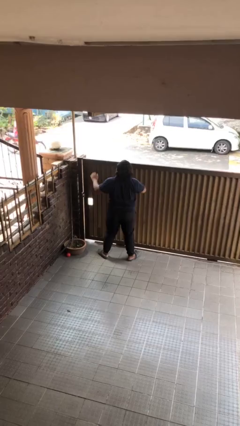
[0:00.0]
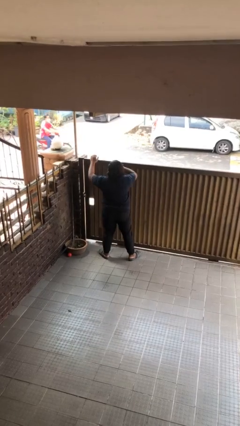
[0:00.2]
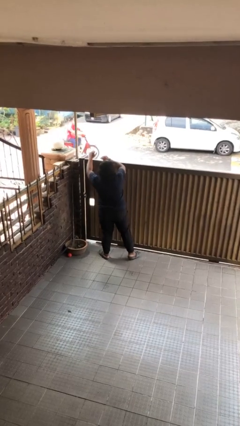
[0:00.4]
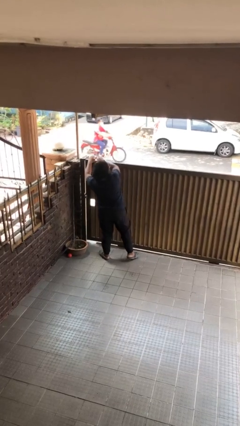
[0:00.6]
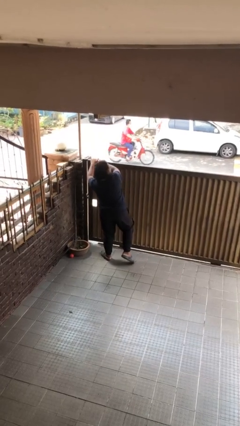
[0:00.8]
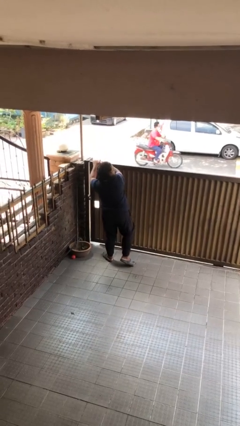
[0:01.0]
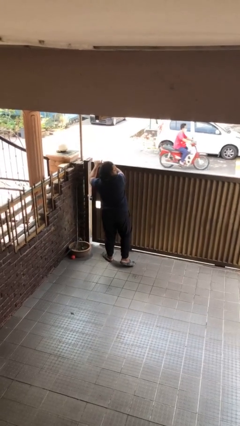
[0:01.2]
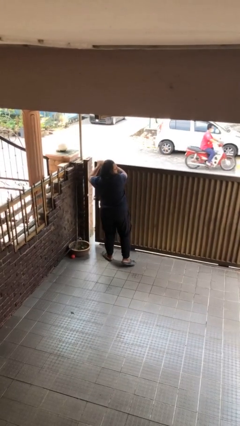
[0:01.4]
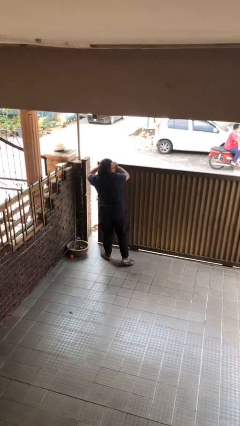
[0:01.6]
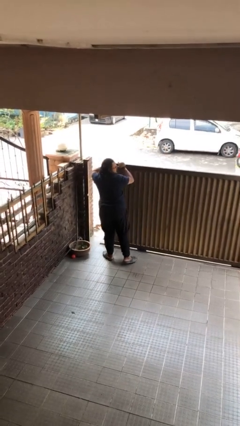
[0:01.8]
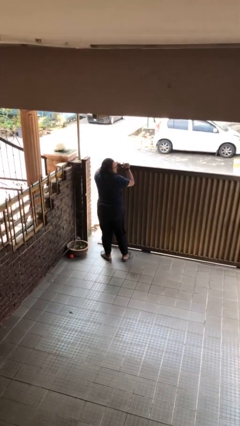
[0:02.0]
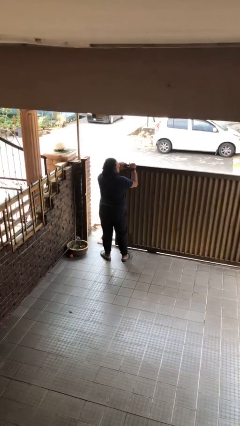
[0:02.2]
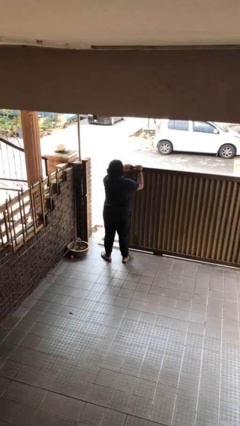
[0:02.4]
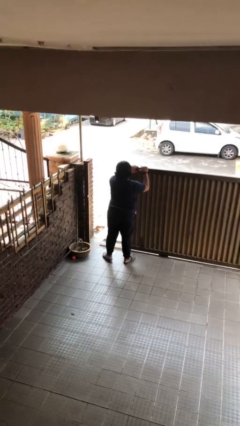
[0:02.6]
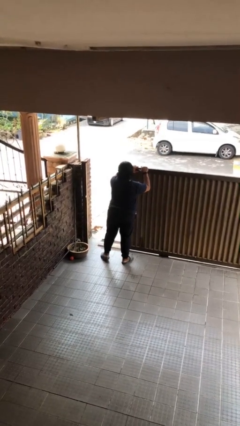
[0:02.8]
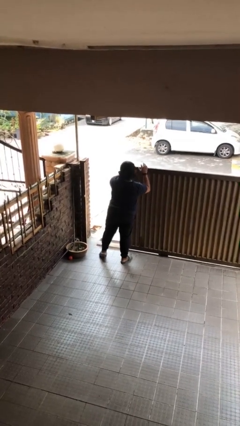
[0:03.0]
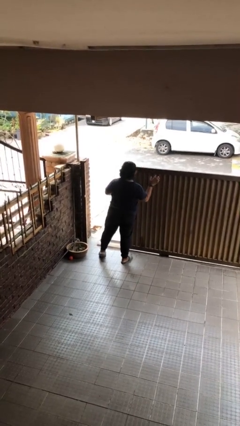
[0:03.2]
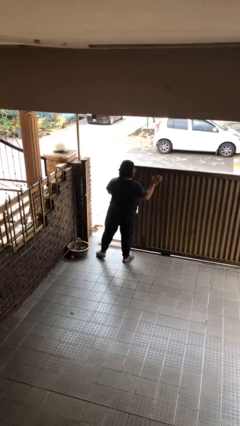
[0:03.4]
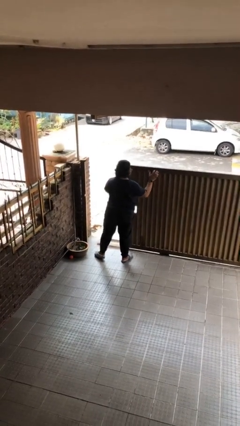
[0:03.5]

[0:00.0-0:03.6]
person opens facility door

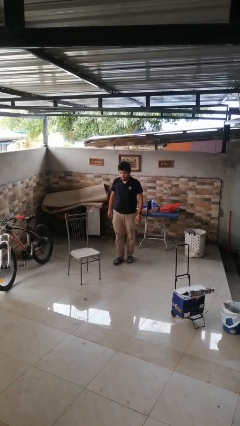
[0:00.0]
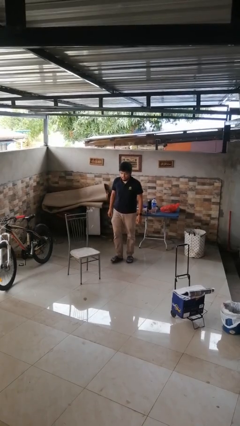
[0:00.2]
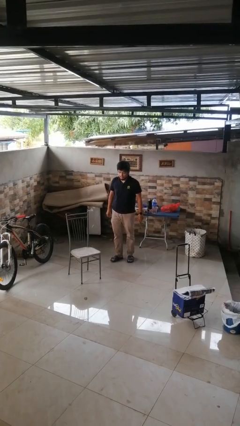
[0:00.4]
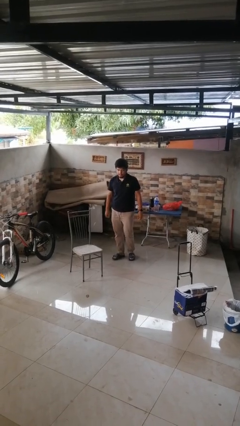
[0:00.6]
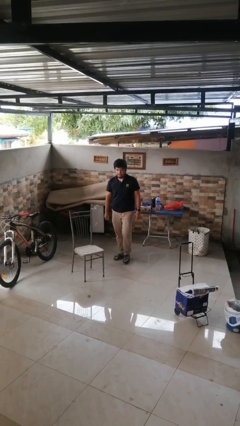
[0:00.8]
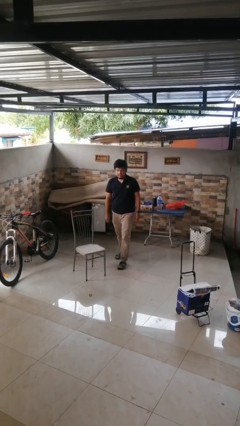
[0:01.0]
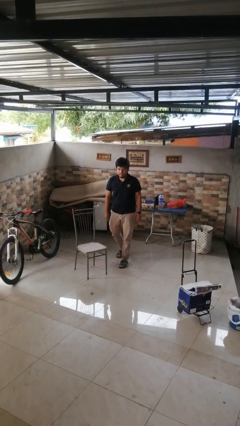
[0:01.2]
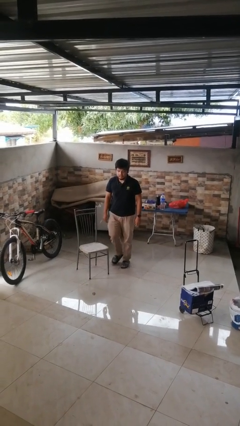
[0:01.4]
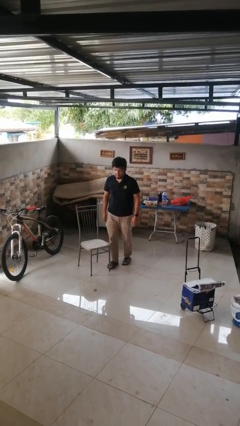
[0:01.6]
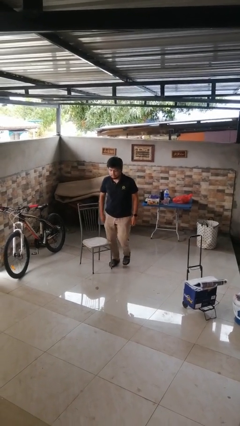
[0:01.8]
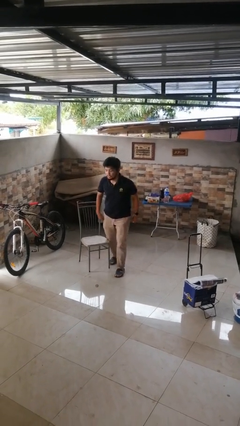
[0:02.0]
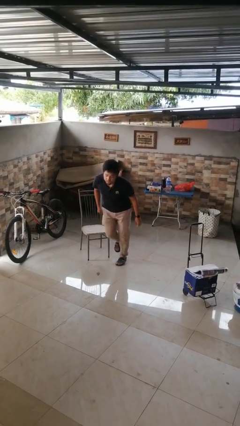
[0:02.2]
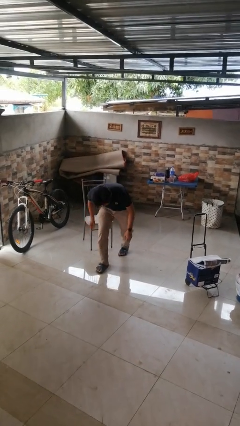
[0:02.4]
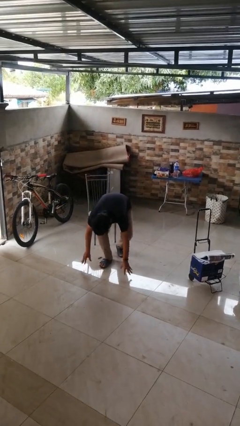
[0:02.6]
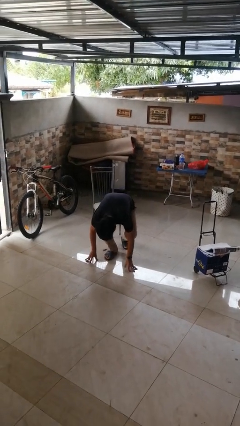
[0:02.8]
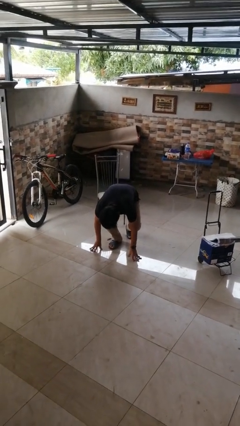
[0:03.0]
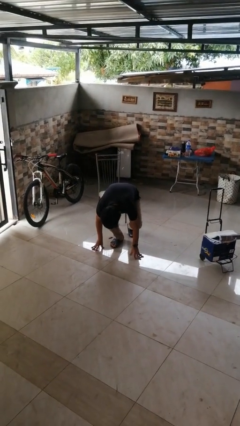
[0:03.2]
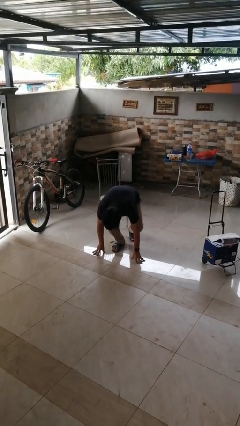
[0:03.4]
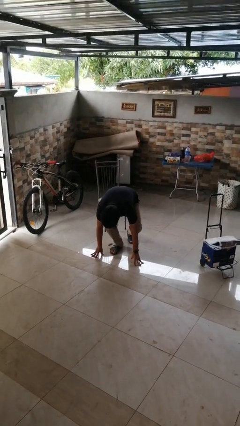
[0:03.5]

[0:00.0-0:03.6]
person trips on object on floor

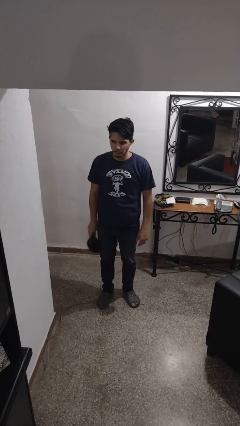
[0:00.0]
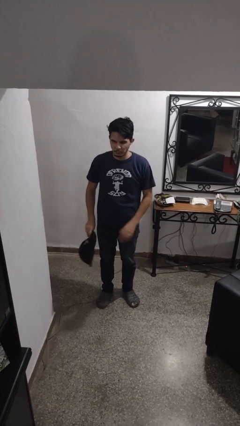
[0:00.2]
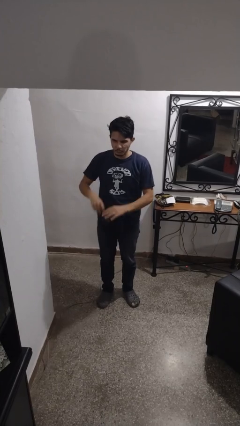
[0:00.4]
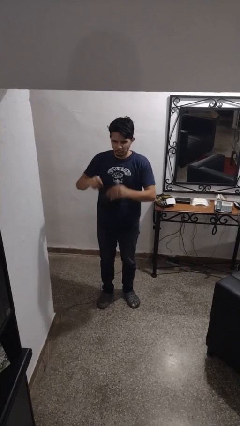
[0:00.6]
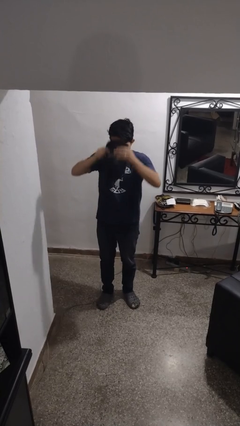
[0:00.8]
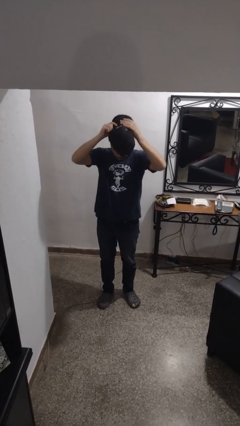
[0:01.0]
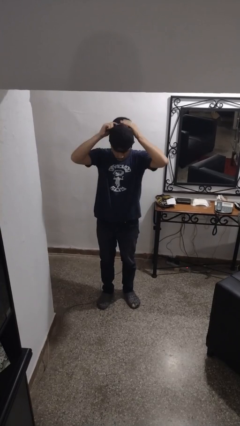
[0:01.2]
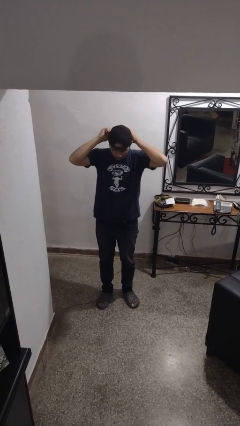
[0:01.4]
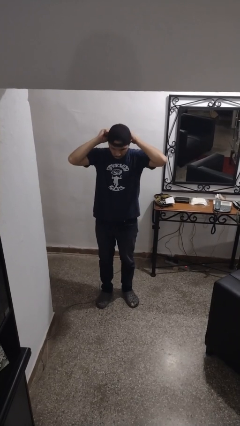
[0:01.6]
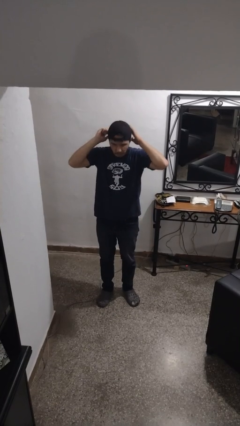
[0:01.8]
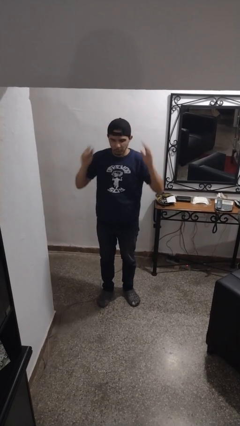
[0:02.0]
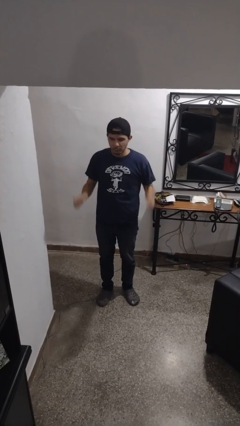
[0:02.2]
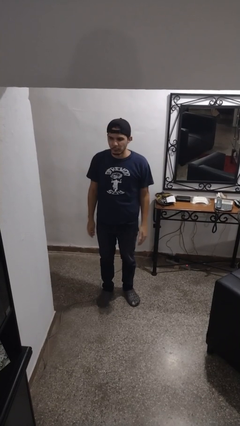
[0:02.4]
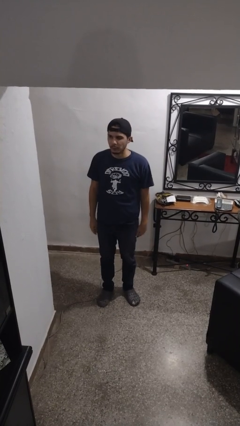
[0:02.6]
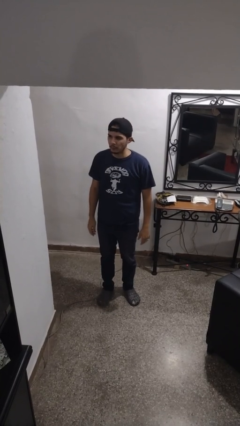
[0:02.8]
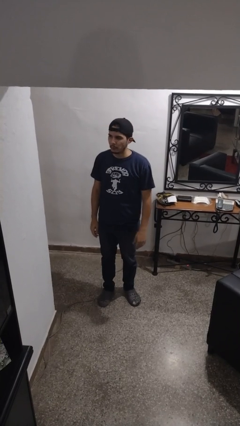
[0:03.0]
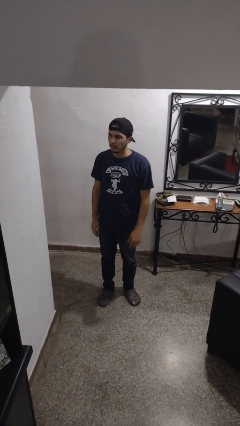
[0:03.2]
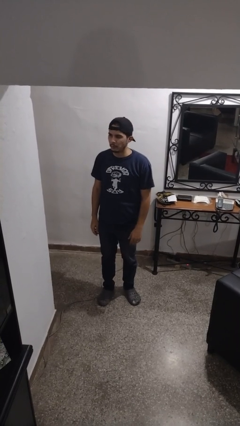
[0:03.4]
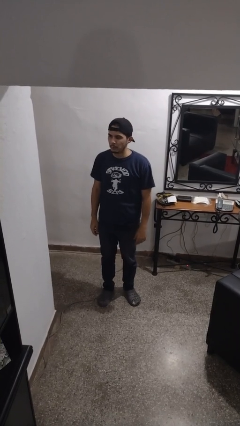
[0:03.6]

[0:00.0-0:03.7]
person puts on hat

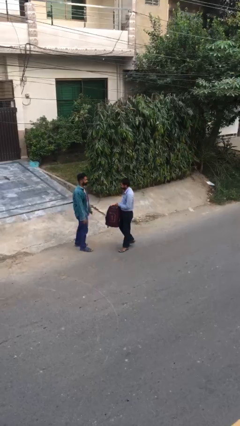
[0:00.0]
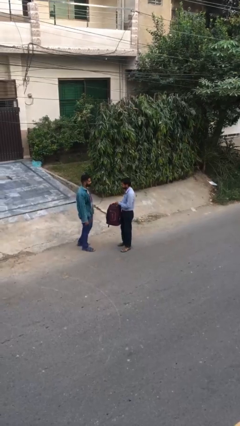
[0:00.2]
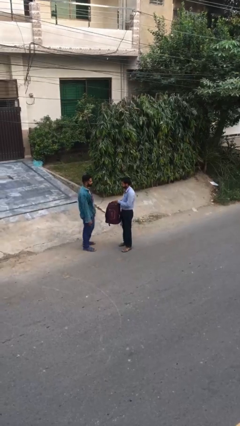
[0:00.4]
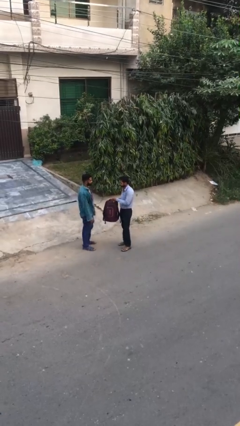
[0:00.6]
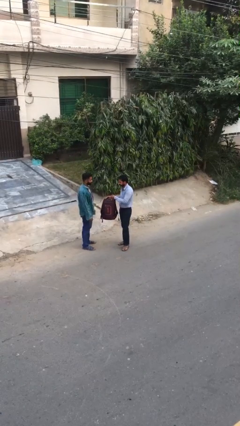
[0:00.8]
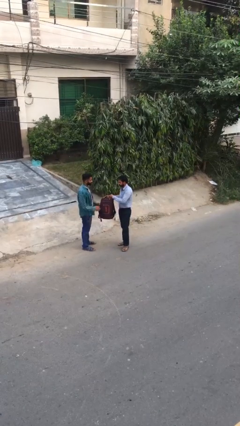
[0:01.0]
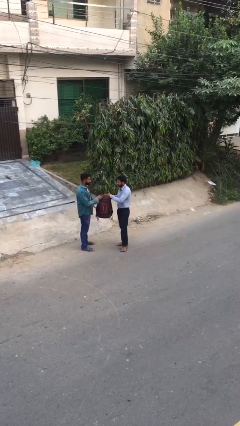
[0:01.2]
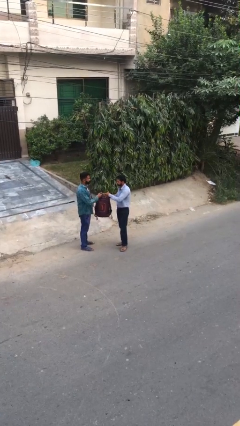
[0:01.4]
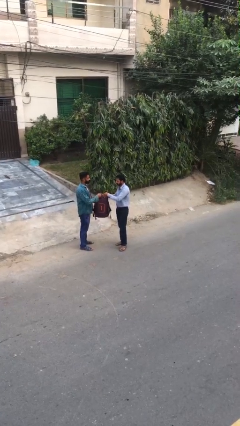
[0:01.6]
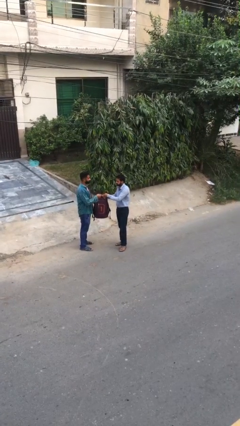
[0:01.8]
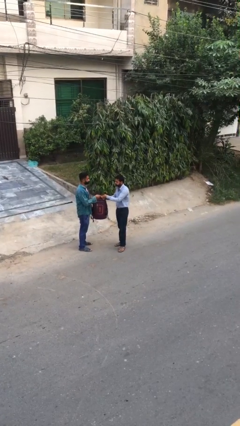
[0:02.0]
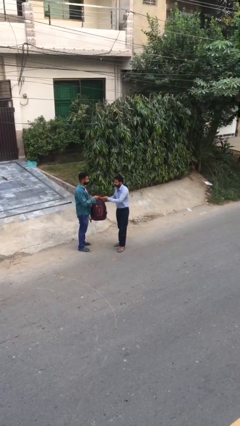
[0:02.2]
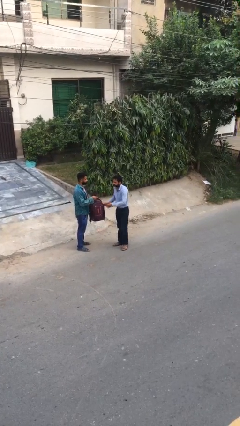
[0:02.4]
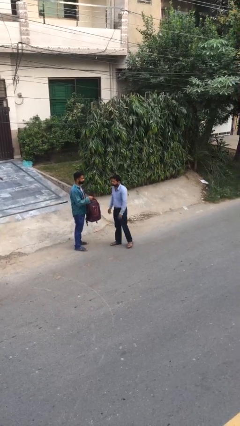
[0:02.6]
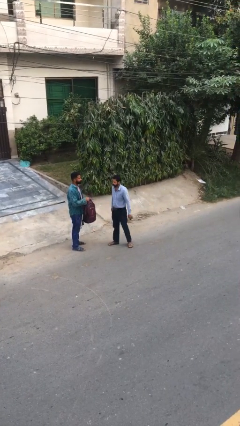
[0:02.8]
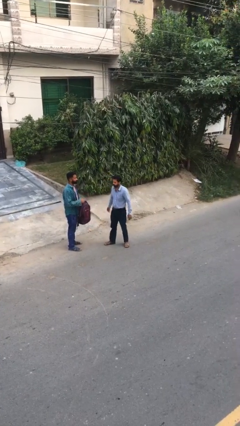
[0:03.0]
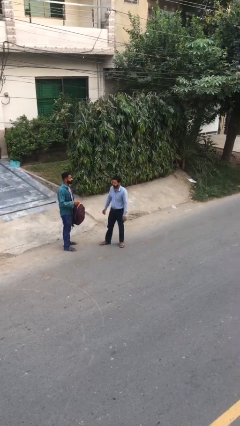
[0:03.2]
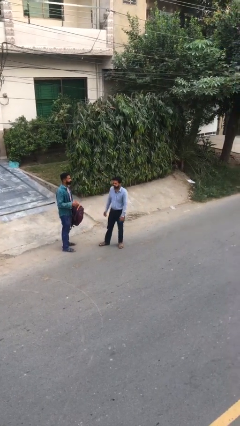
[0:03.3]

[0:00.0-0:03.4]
person transfers object to person

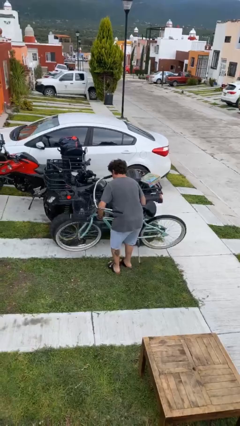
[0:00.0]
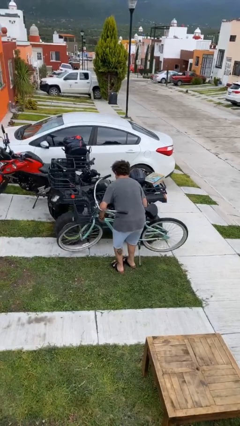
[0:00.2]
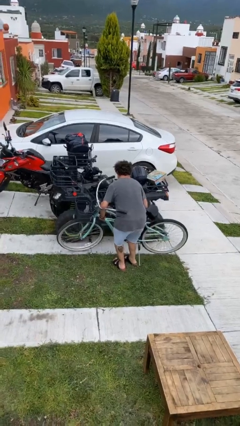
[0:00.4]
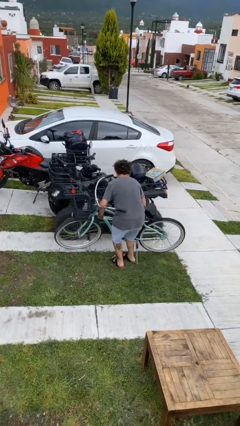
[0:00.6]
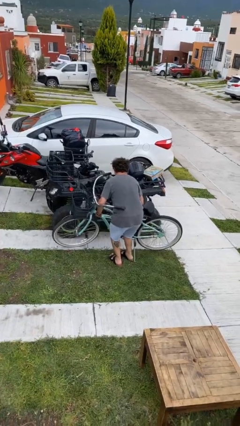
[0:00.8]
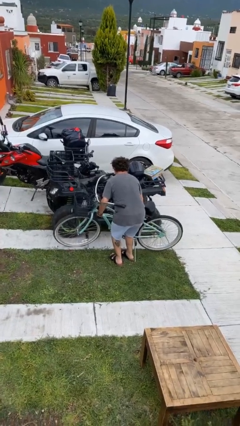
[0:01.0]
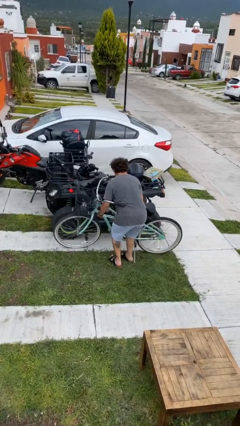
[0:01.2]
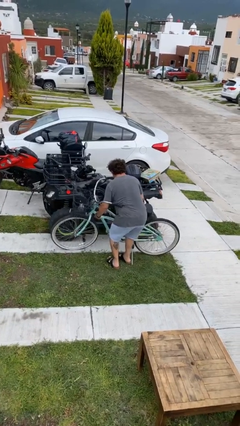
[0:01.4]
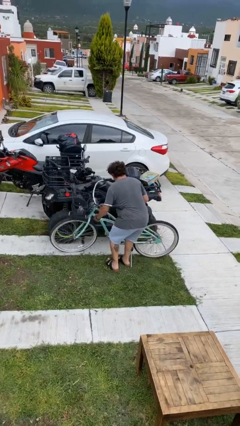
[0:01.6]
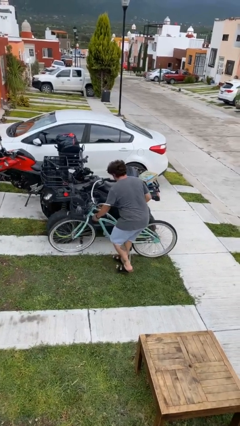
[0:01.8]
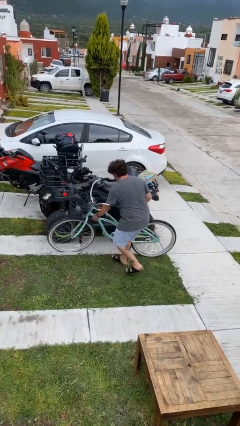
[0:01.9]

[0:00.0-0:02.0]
person puts down object on floor

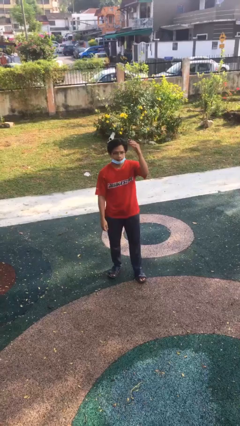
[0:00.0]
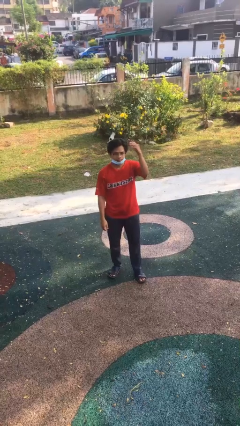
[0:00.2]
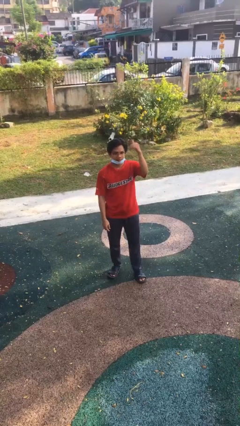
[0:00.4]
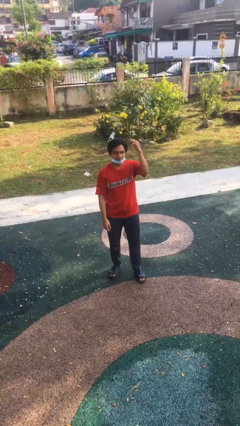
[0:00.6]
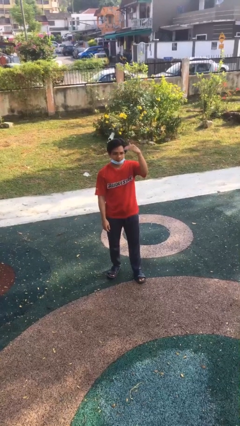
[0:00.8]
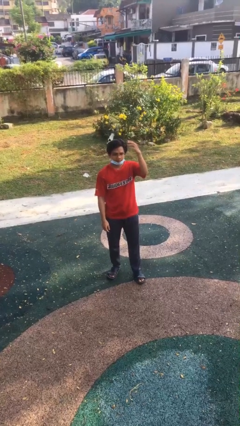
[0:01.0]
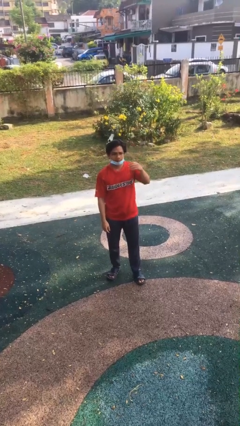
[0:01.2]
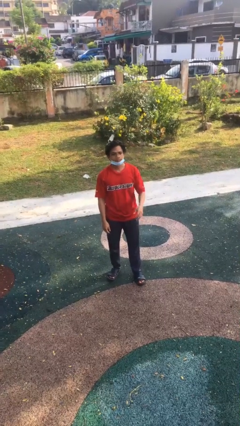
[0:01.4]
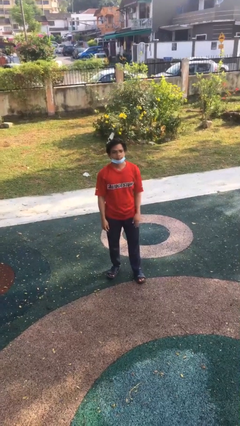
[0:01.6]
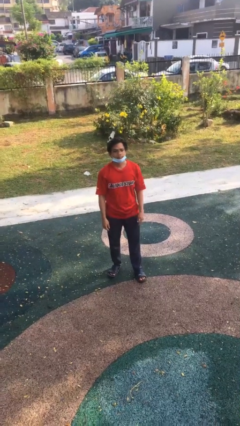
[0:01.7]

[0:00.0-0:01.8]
person gestures come here
